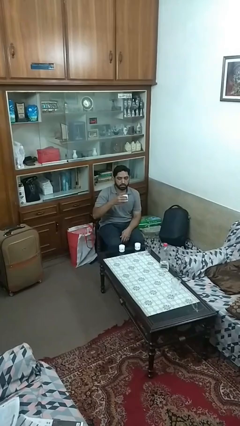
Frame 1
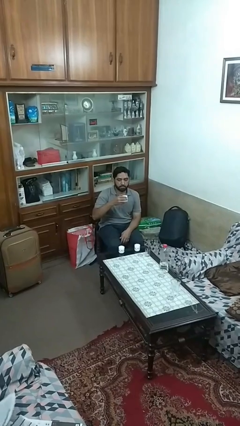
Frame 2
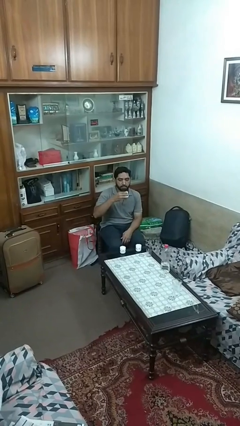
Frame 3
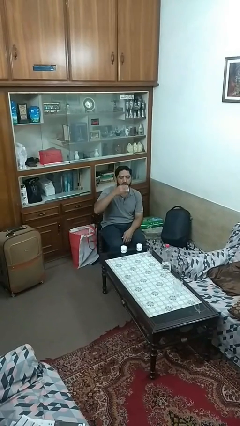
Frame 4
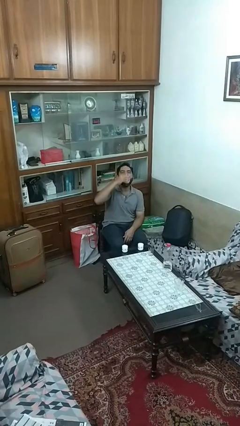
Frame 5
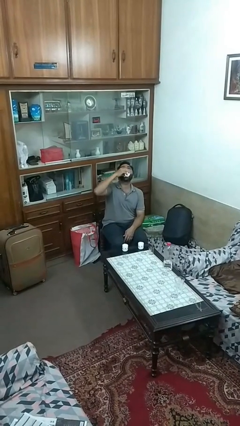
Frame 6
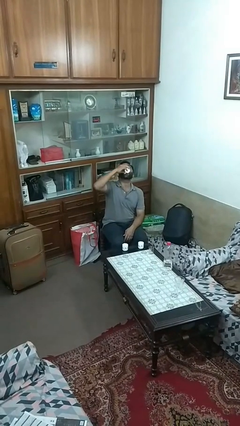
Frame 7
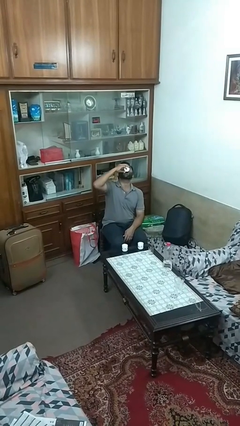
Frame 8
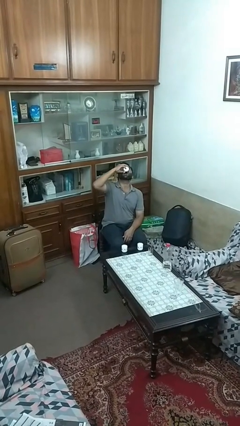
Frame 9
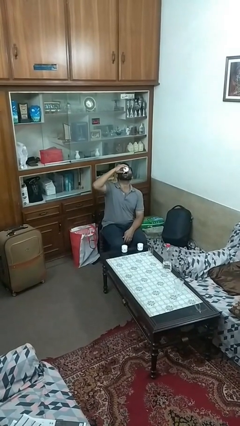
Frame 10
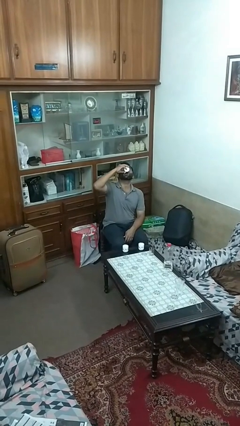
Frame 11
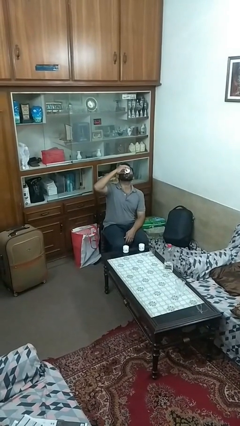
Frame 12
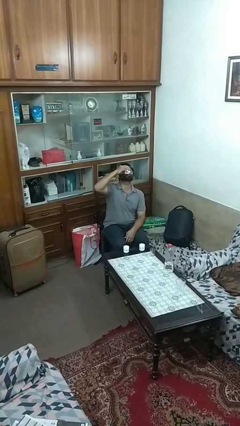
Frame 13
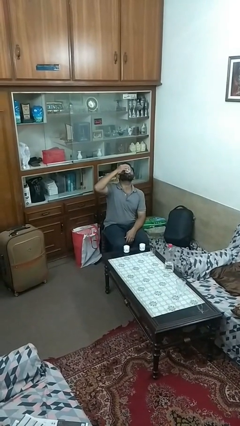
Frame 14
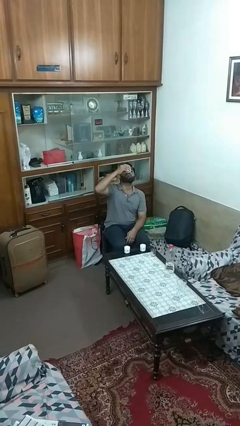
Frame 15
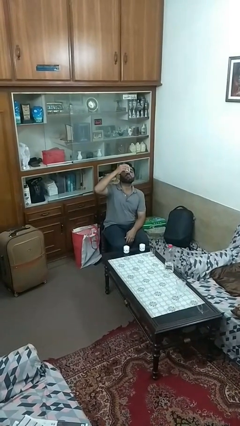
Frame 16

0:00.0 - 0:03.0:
person drinks from shotglass

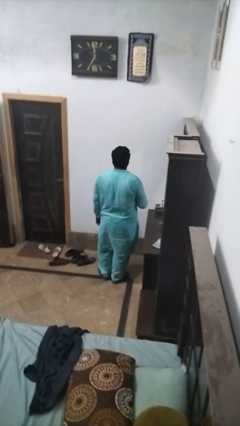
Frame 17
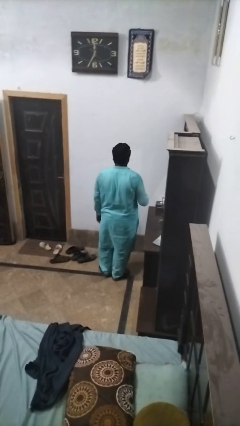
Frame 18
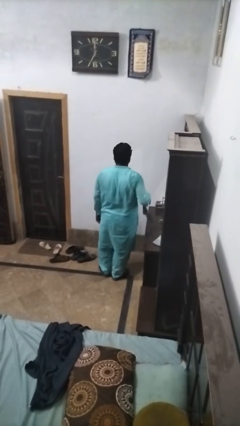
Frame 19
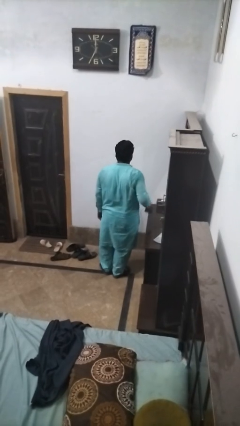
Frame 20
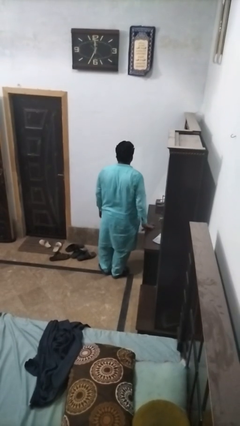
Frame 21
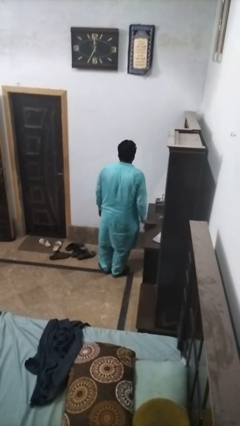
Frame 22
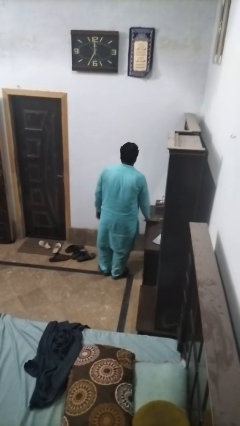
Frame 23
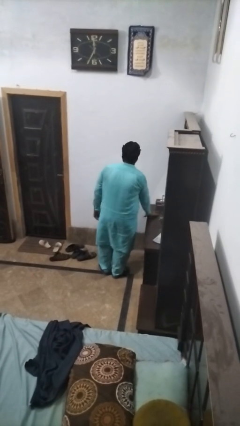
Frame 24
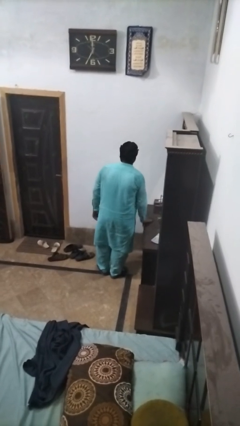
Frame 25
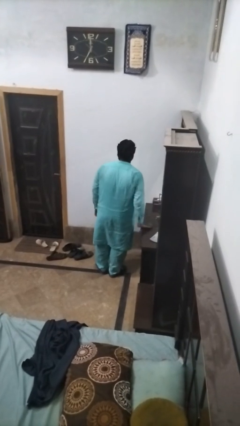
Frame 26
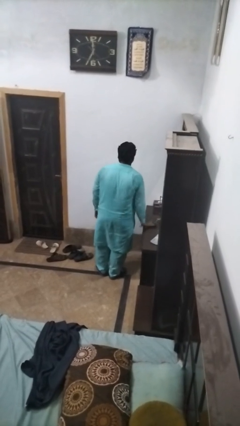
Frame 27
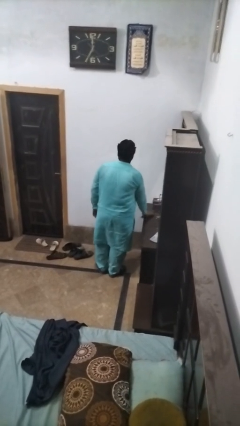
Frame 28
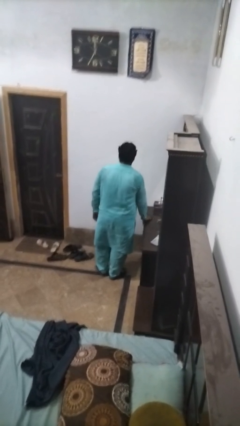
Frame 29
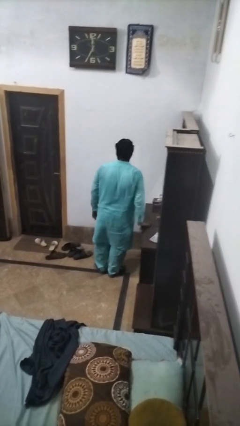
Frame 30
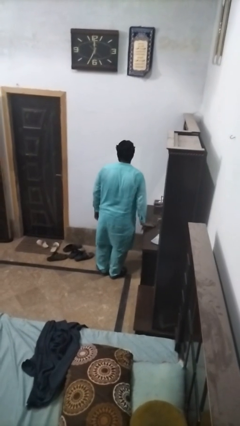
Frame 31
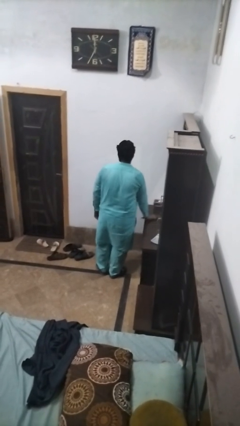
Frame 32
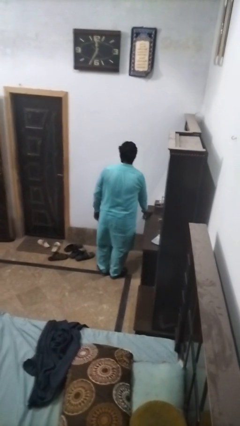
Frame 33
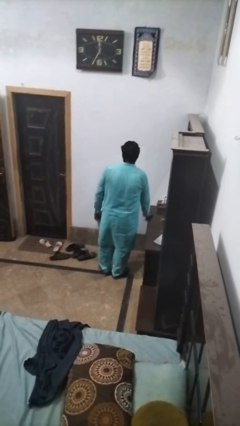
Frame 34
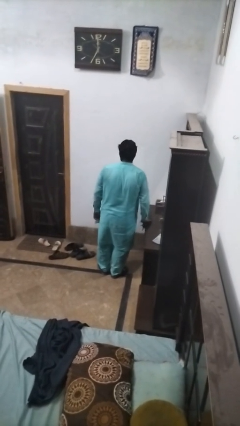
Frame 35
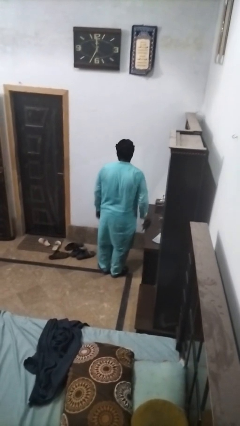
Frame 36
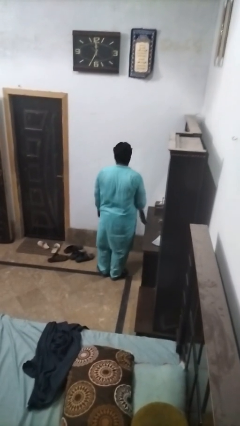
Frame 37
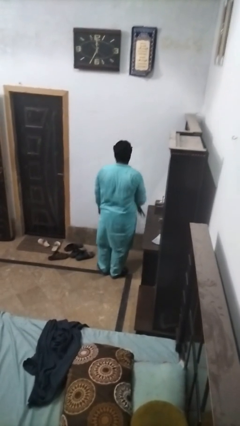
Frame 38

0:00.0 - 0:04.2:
person cleans table with rag

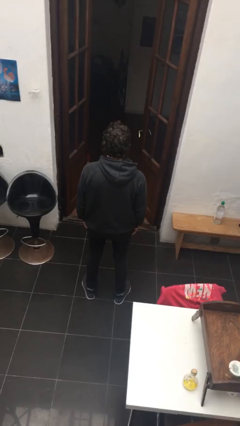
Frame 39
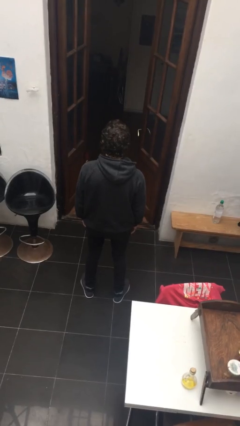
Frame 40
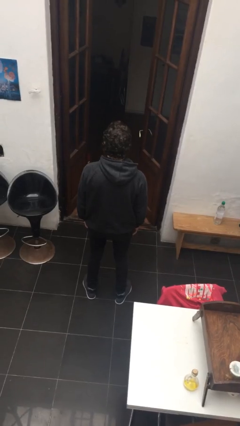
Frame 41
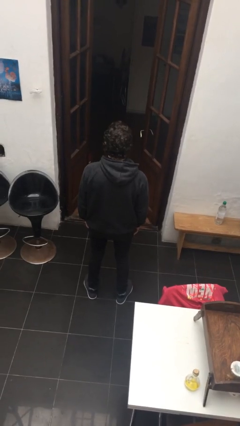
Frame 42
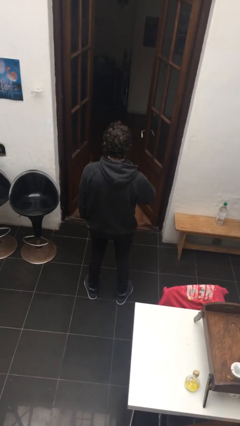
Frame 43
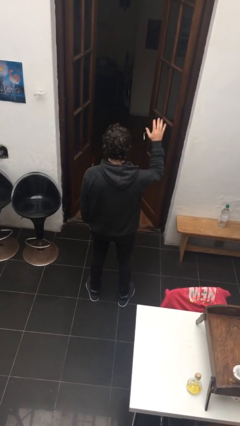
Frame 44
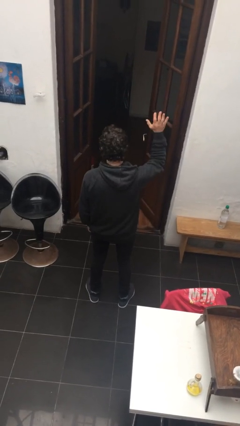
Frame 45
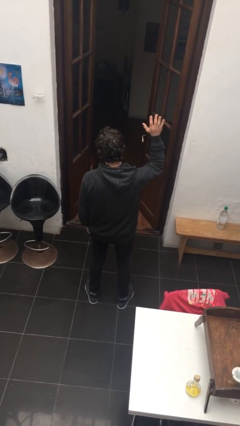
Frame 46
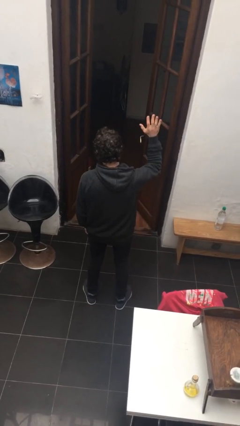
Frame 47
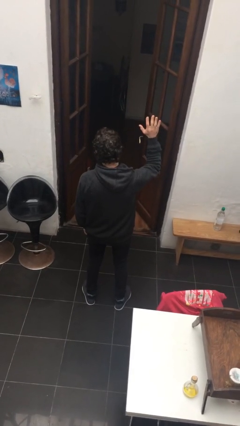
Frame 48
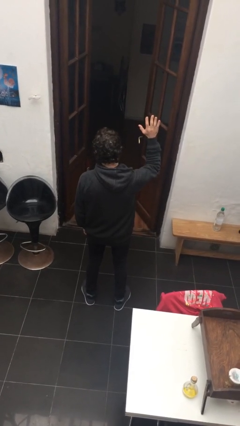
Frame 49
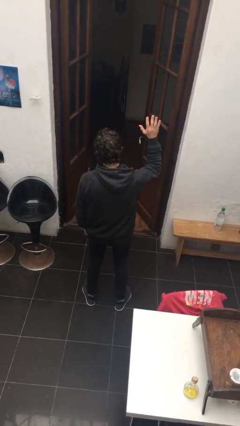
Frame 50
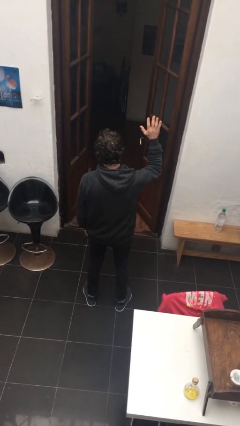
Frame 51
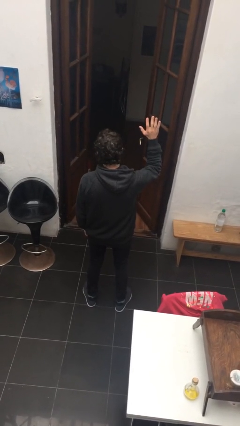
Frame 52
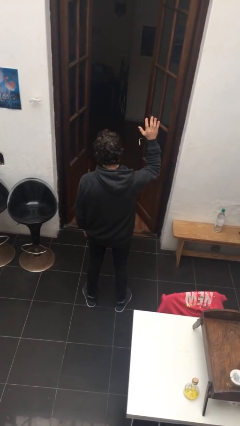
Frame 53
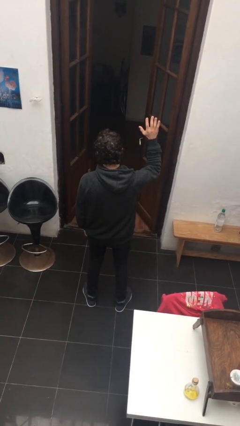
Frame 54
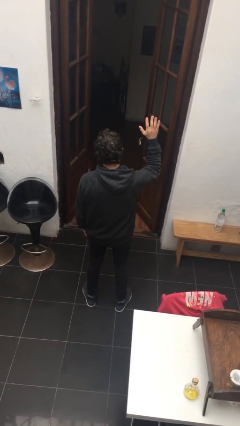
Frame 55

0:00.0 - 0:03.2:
person gestures raise hand

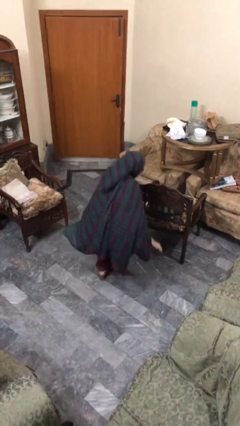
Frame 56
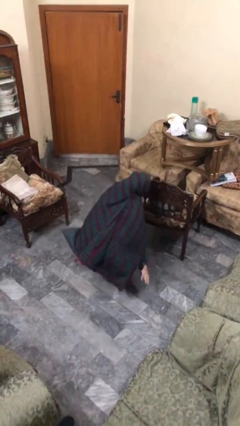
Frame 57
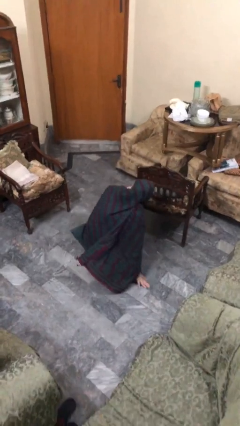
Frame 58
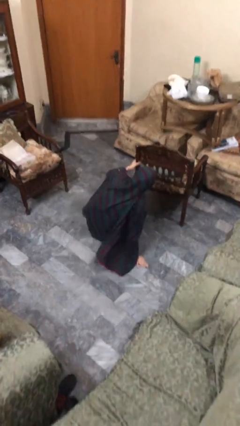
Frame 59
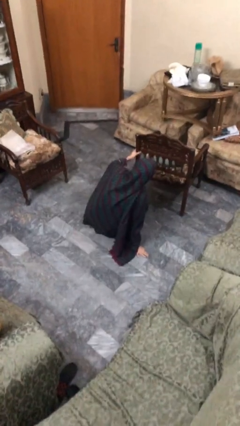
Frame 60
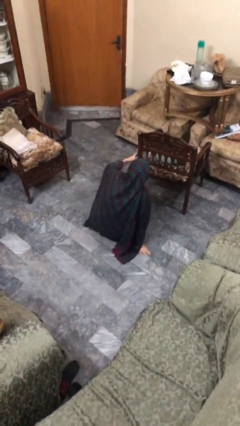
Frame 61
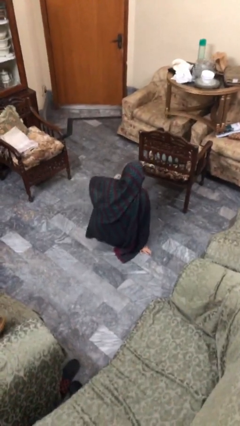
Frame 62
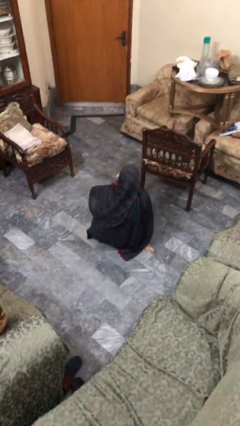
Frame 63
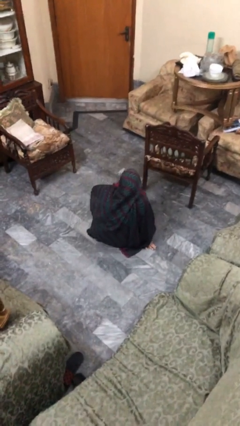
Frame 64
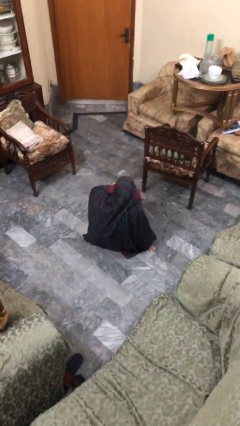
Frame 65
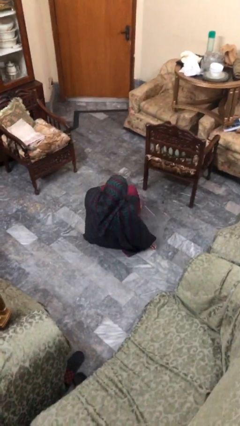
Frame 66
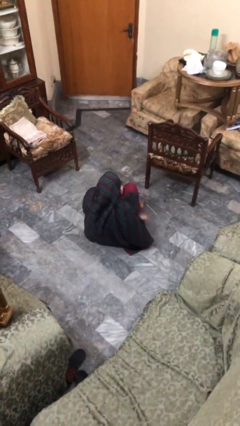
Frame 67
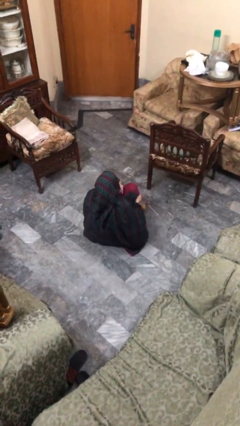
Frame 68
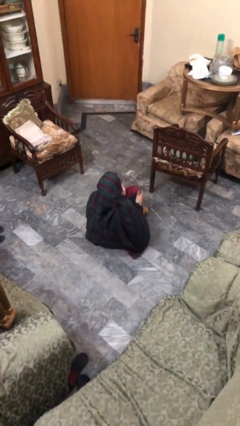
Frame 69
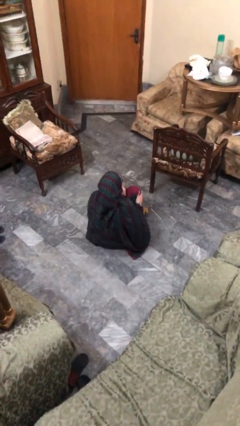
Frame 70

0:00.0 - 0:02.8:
person sits crisscross

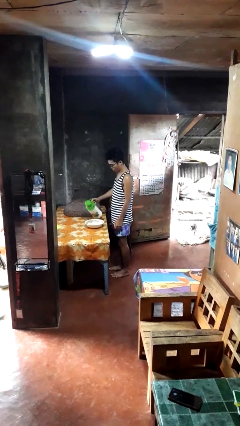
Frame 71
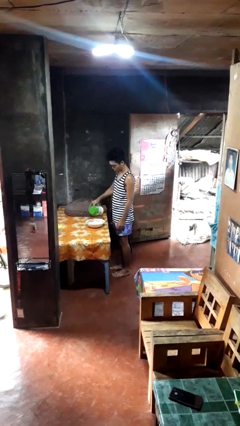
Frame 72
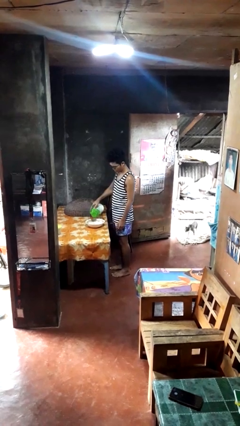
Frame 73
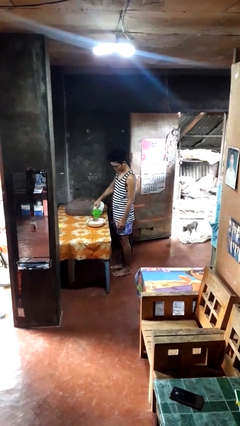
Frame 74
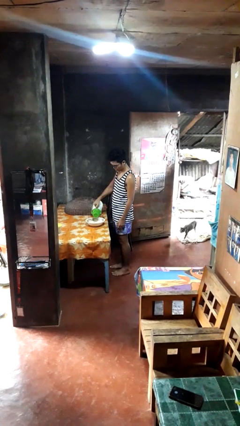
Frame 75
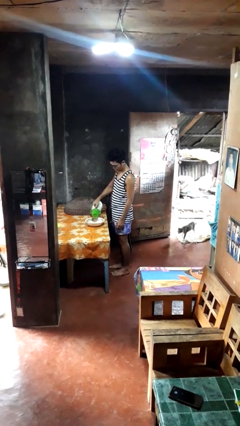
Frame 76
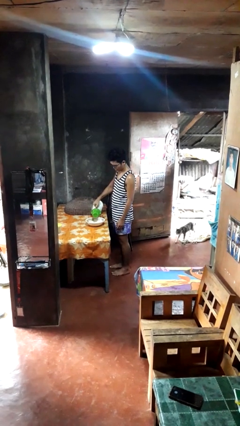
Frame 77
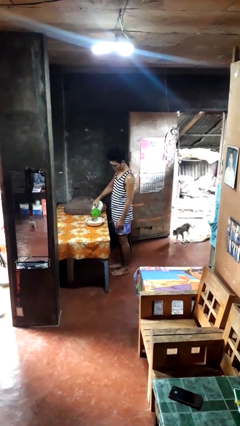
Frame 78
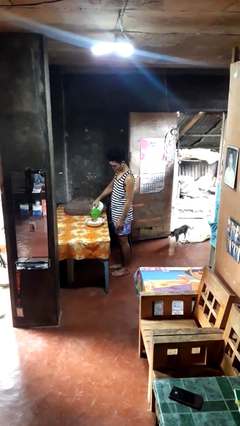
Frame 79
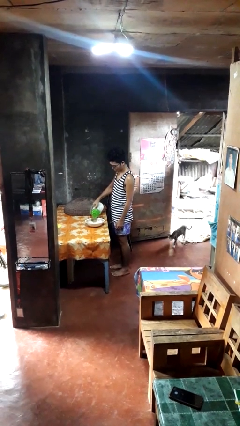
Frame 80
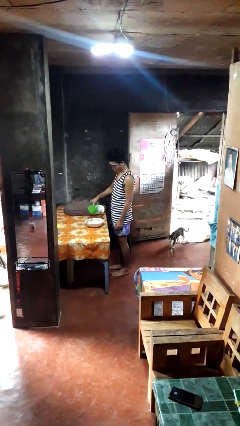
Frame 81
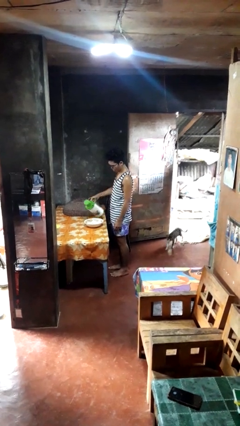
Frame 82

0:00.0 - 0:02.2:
person pours into bowl

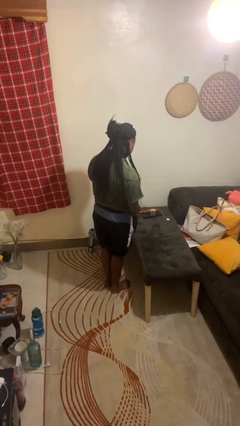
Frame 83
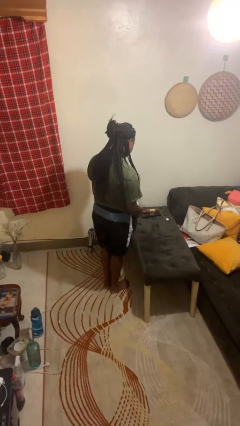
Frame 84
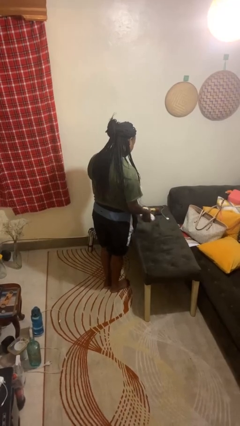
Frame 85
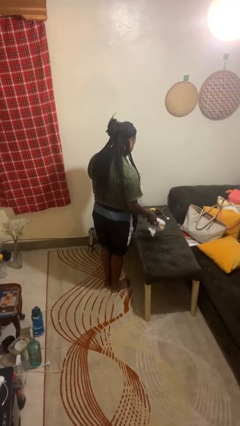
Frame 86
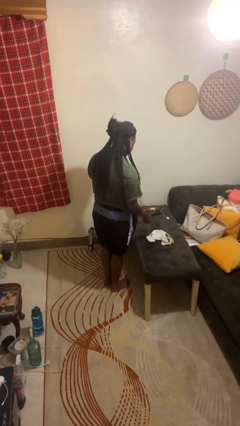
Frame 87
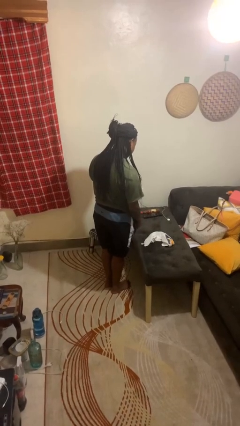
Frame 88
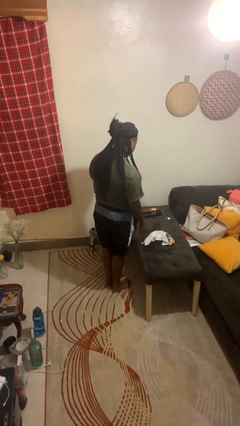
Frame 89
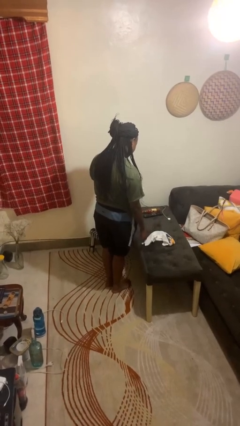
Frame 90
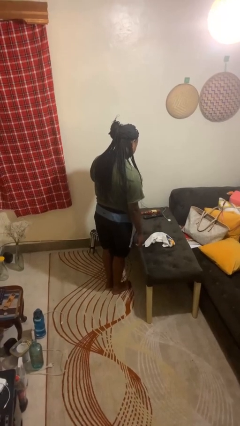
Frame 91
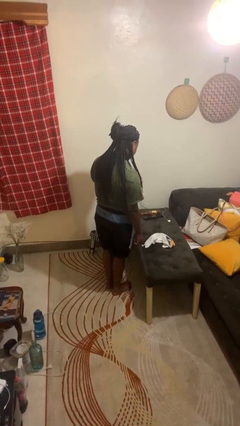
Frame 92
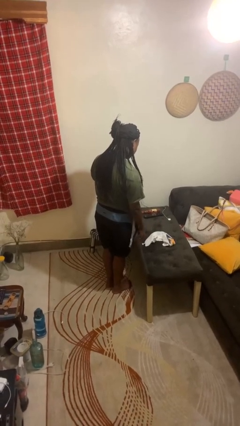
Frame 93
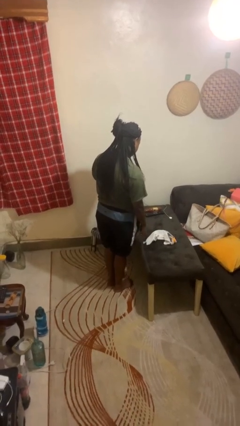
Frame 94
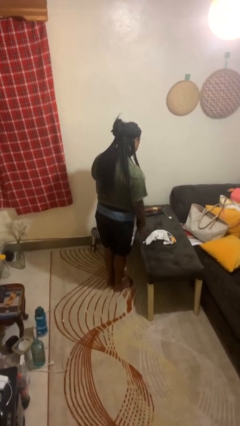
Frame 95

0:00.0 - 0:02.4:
person throws object on table
